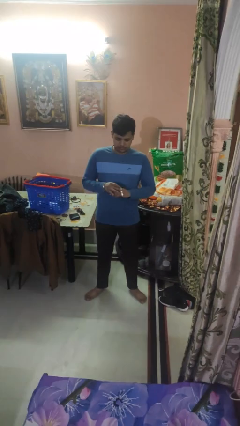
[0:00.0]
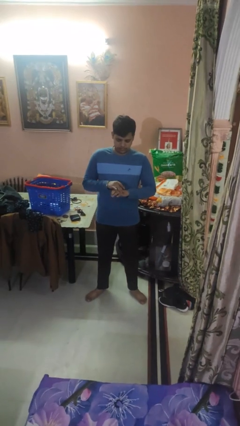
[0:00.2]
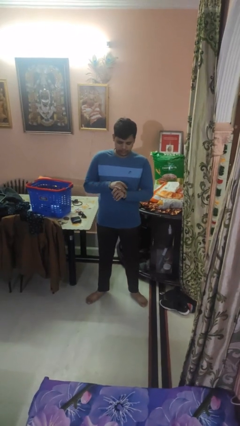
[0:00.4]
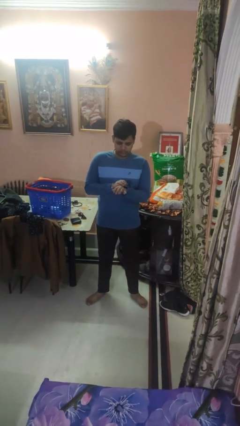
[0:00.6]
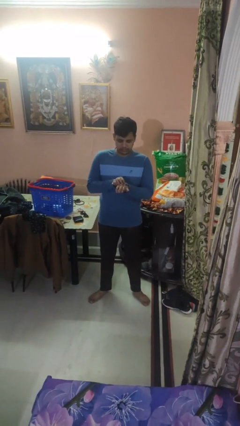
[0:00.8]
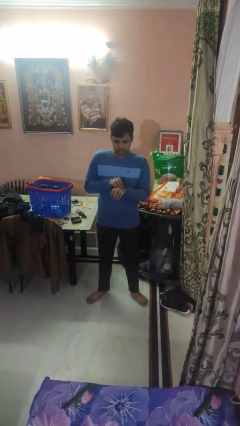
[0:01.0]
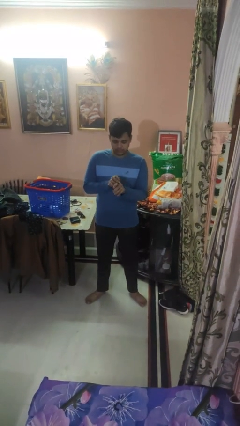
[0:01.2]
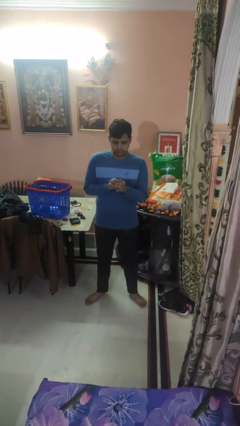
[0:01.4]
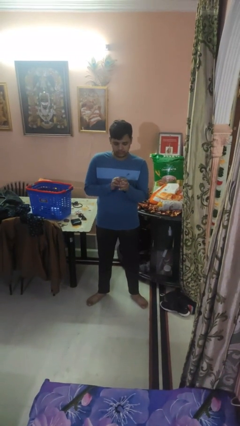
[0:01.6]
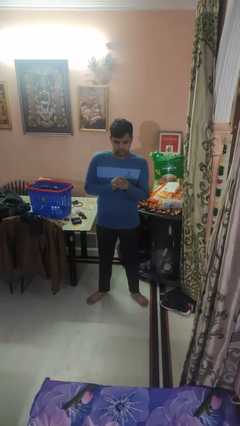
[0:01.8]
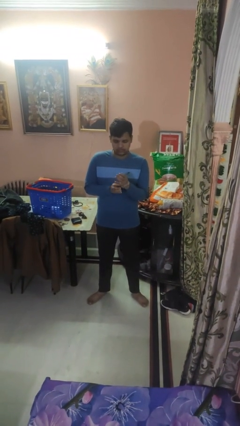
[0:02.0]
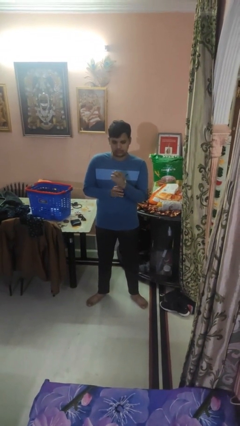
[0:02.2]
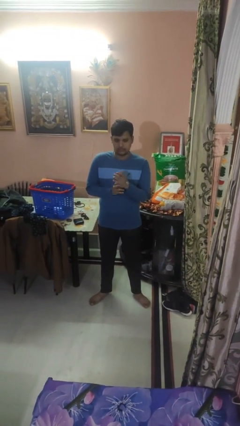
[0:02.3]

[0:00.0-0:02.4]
person puts on wristwatch

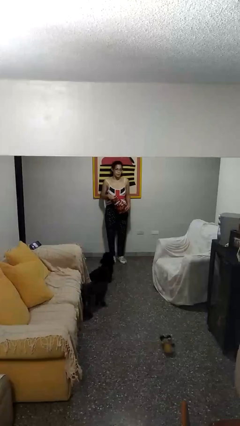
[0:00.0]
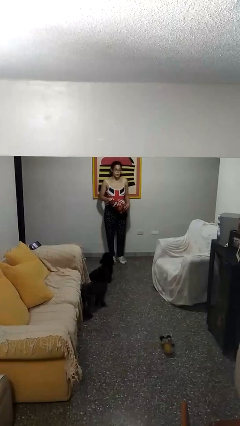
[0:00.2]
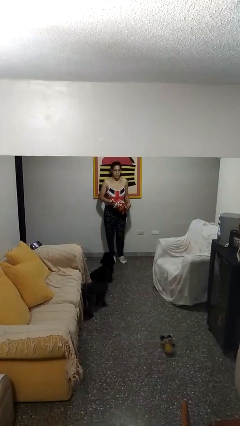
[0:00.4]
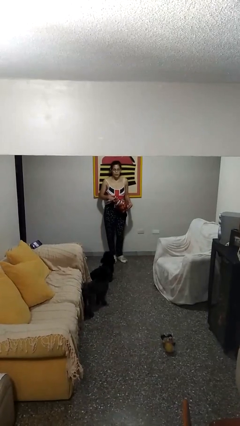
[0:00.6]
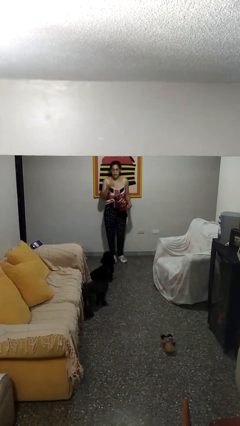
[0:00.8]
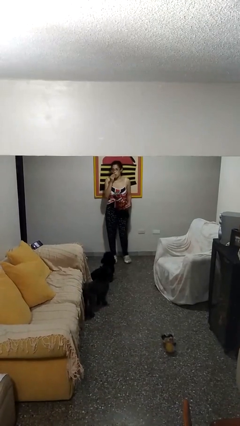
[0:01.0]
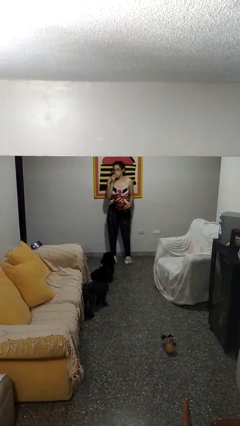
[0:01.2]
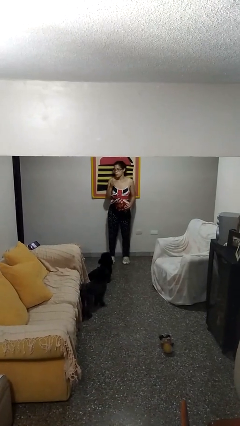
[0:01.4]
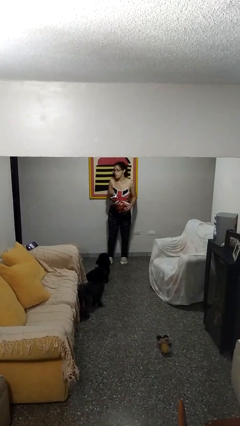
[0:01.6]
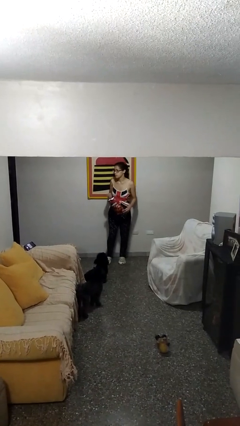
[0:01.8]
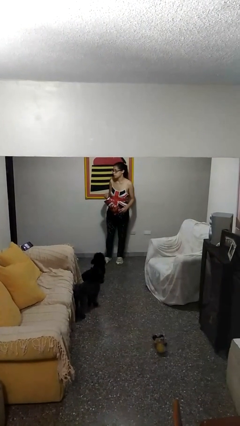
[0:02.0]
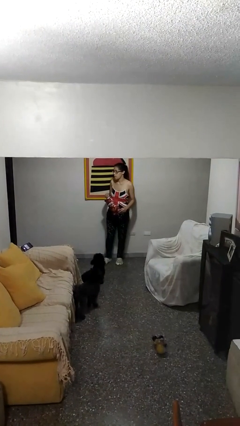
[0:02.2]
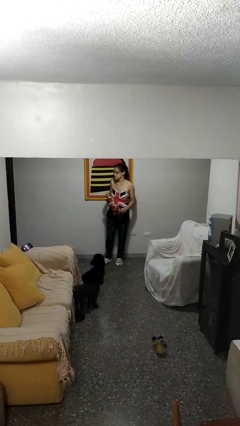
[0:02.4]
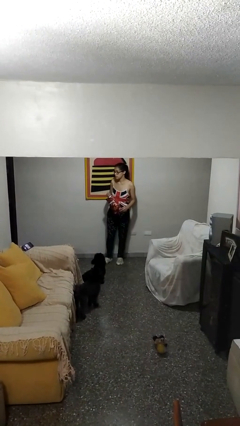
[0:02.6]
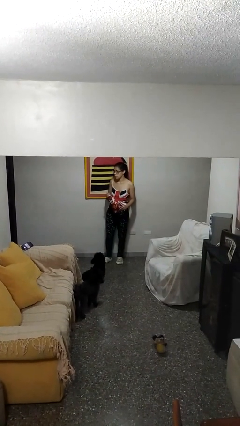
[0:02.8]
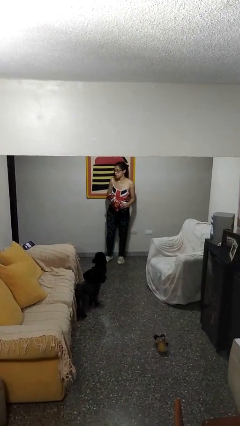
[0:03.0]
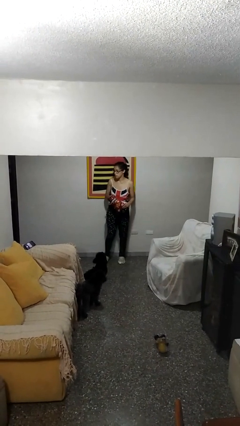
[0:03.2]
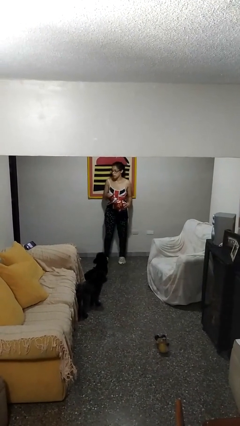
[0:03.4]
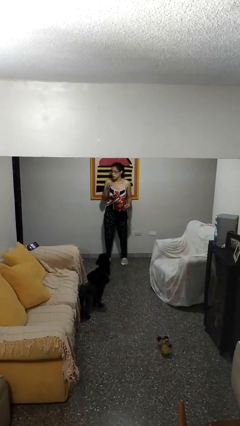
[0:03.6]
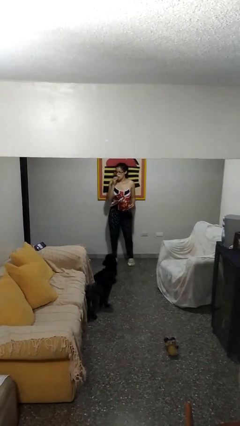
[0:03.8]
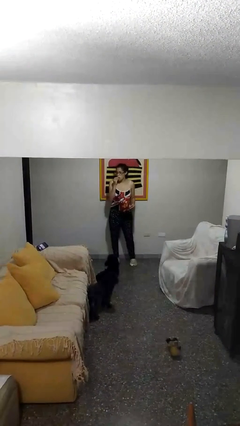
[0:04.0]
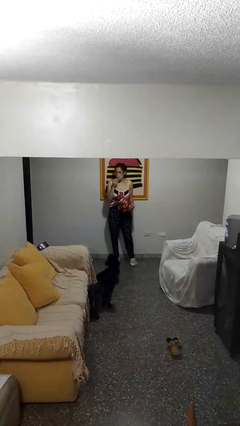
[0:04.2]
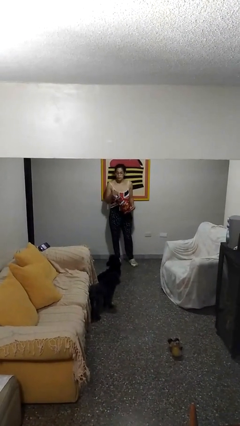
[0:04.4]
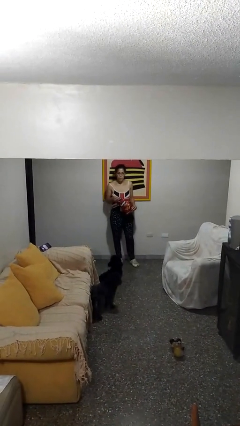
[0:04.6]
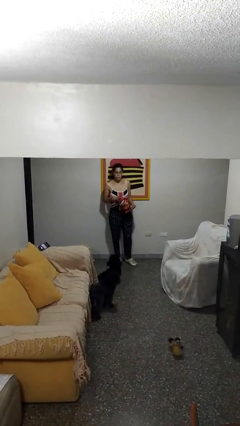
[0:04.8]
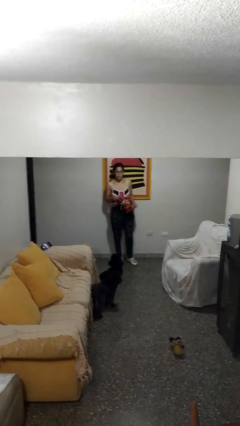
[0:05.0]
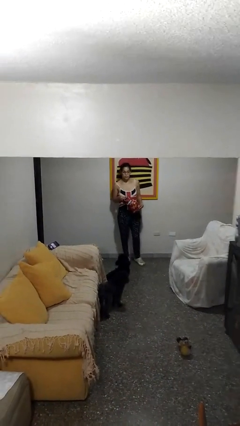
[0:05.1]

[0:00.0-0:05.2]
person eats snack from bag

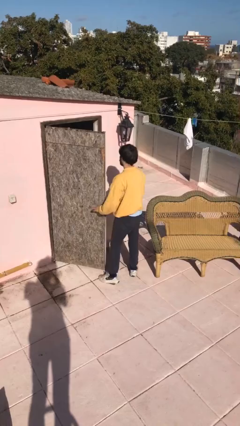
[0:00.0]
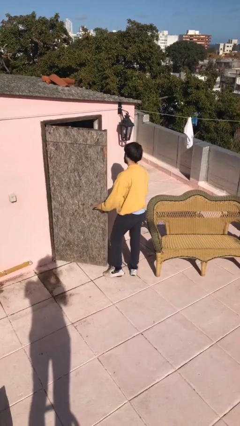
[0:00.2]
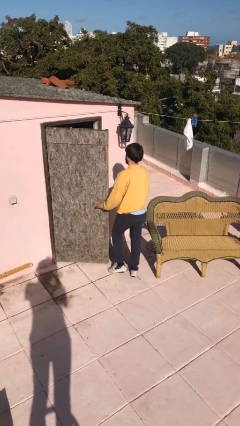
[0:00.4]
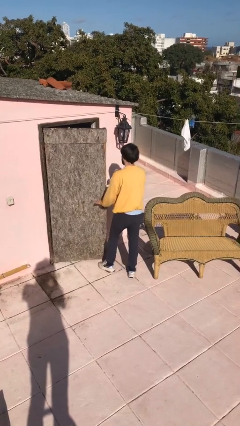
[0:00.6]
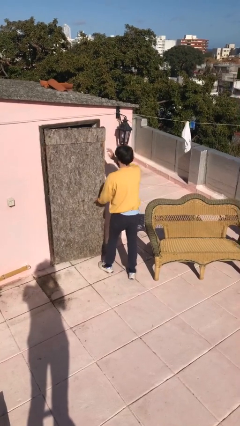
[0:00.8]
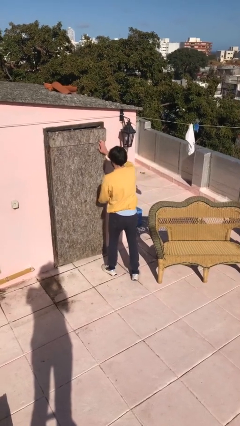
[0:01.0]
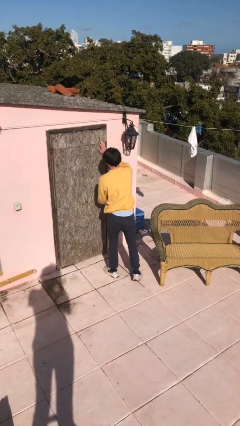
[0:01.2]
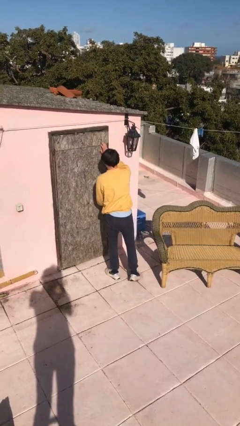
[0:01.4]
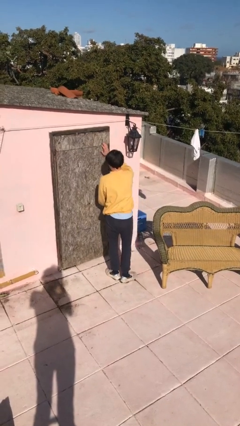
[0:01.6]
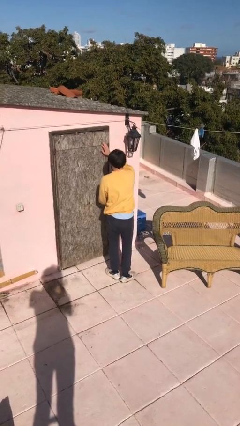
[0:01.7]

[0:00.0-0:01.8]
person closes facility door

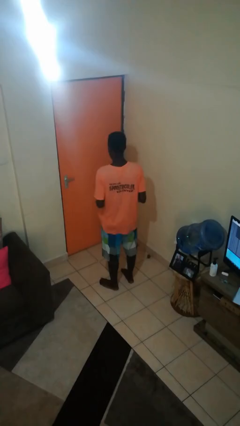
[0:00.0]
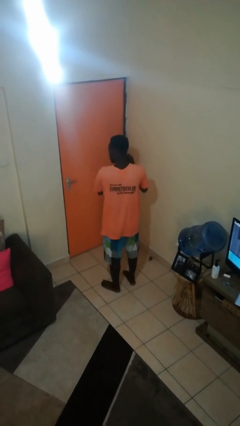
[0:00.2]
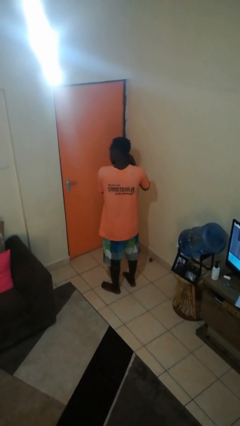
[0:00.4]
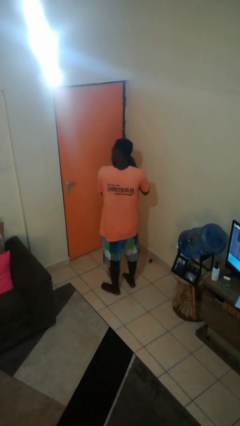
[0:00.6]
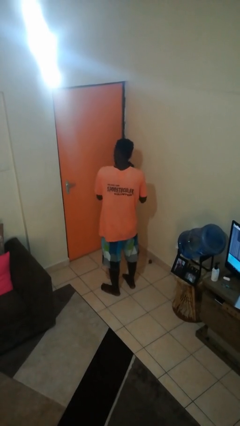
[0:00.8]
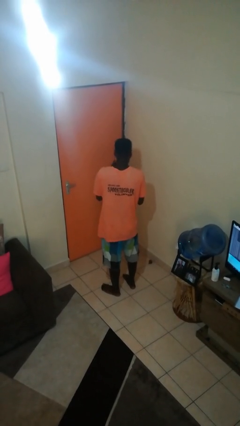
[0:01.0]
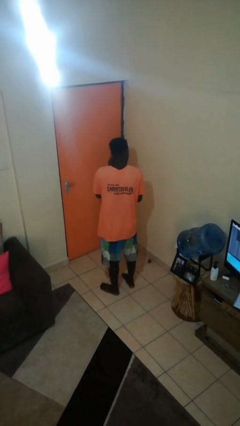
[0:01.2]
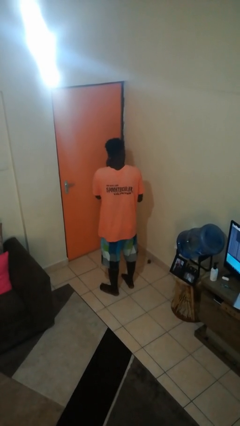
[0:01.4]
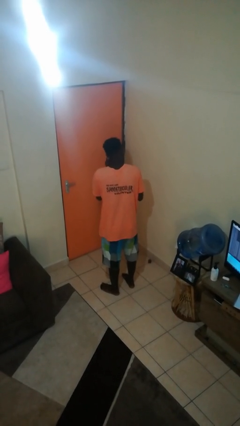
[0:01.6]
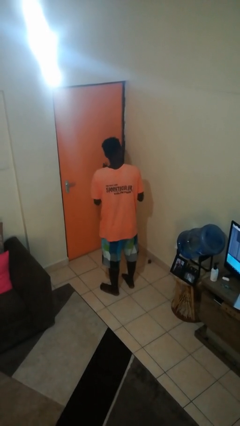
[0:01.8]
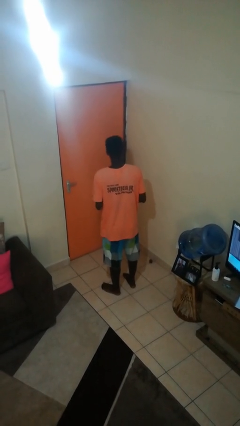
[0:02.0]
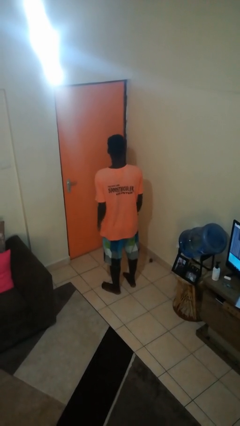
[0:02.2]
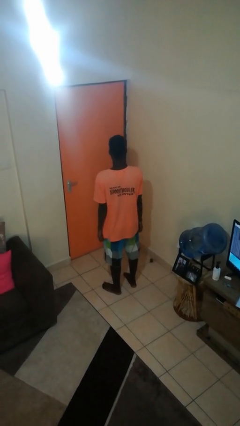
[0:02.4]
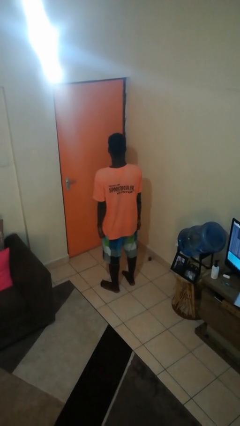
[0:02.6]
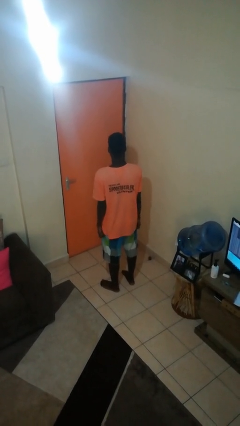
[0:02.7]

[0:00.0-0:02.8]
person takes off earrings

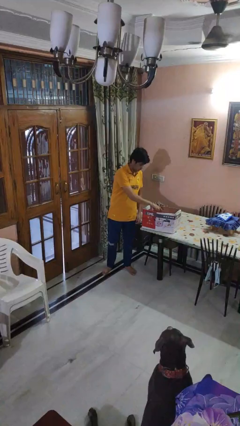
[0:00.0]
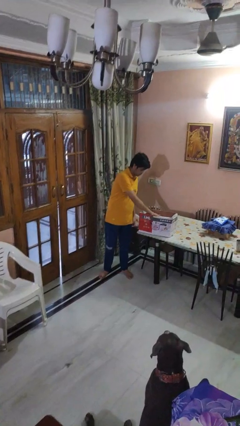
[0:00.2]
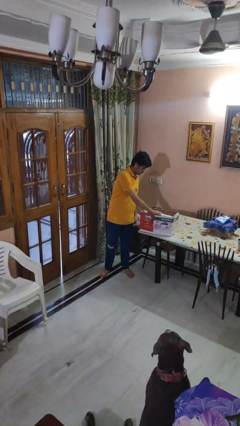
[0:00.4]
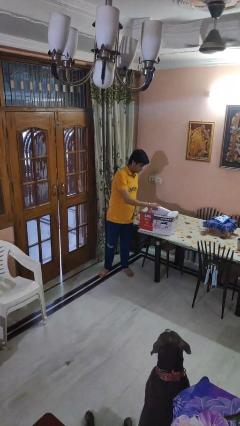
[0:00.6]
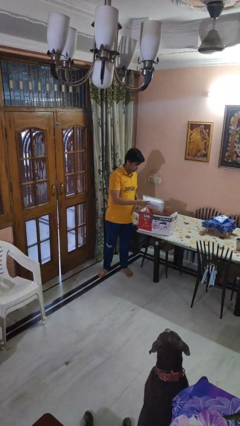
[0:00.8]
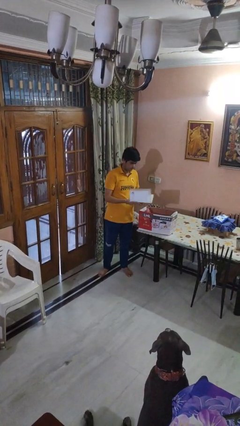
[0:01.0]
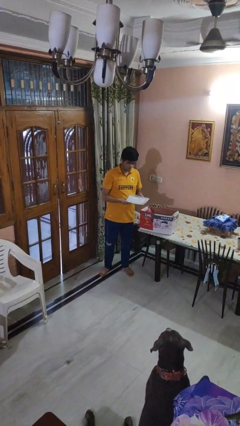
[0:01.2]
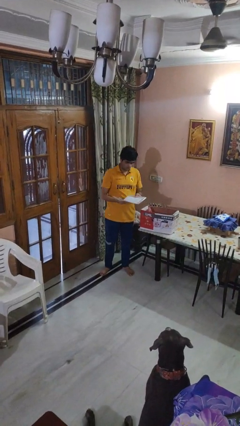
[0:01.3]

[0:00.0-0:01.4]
person takes object from box

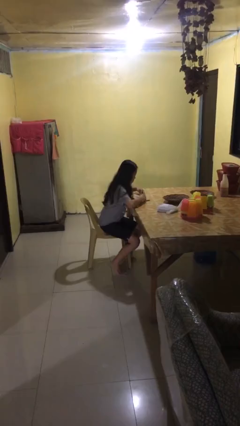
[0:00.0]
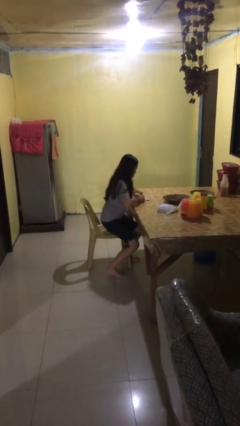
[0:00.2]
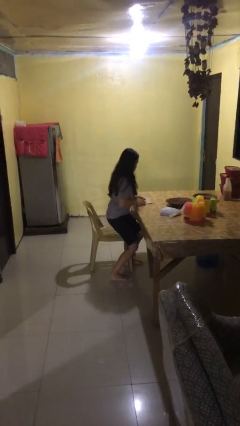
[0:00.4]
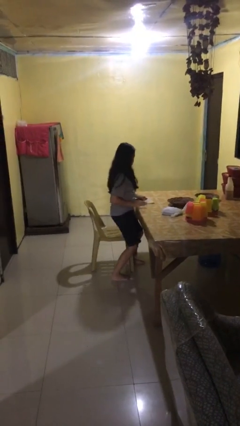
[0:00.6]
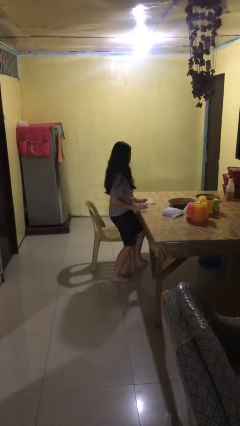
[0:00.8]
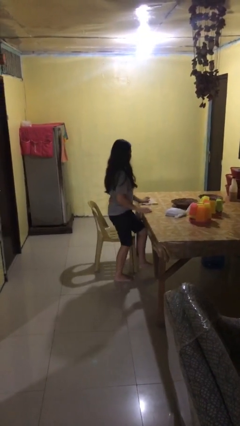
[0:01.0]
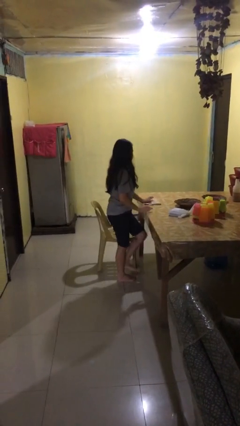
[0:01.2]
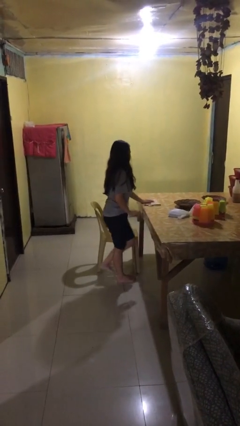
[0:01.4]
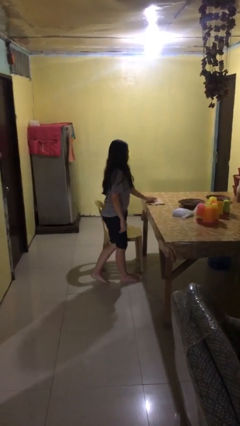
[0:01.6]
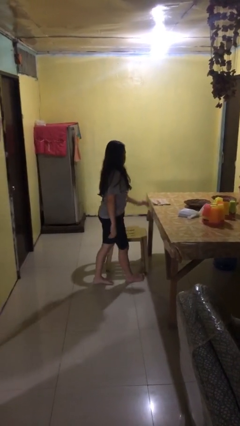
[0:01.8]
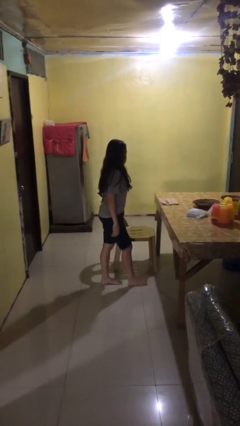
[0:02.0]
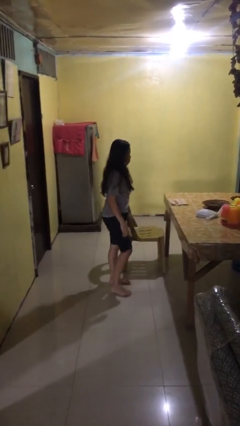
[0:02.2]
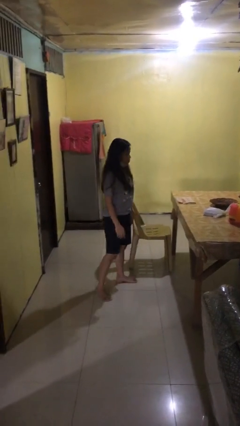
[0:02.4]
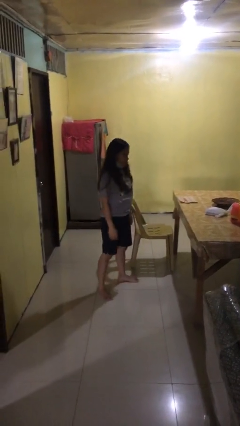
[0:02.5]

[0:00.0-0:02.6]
person stands up

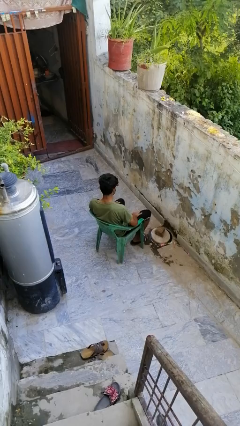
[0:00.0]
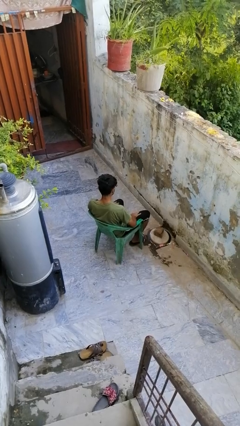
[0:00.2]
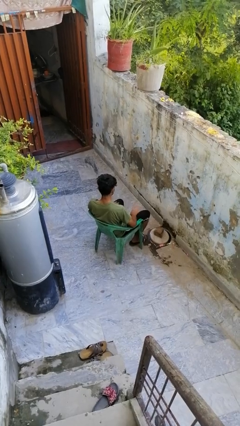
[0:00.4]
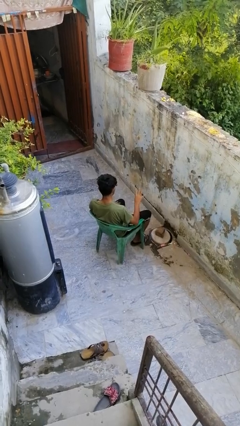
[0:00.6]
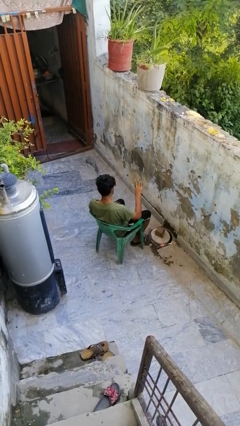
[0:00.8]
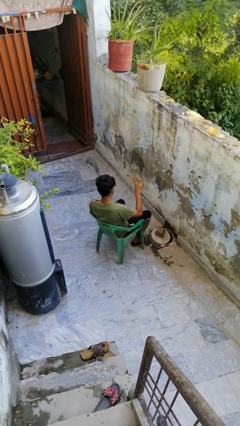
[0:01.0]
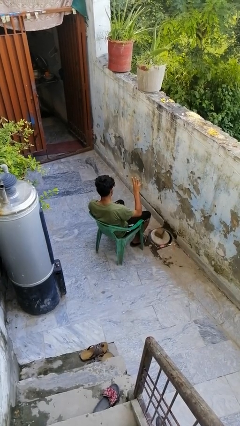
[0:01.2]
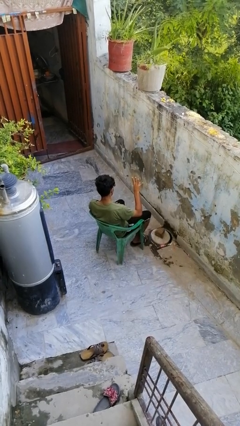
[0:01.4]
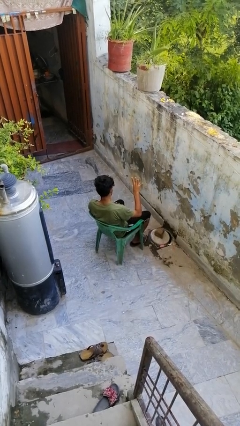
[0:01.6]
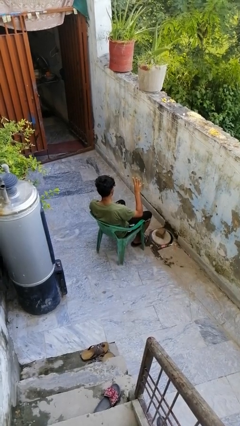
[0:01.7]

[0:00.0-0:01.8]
person gestures number four
